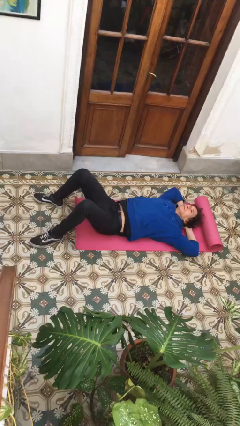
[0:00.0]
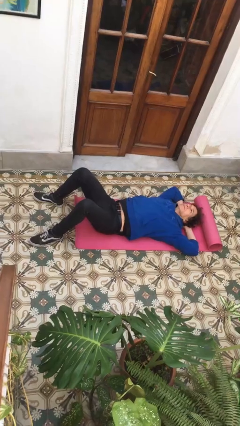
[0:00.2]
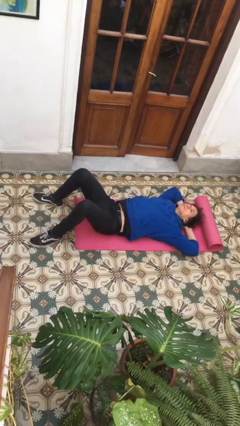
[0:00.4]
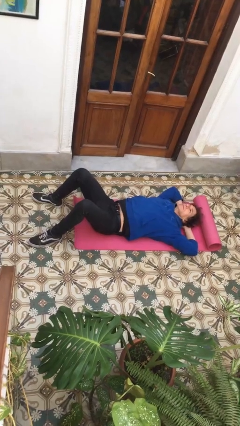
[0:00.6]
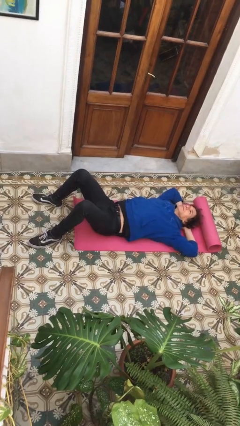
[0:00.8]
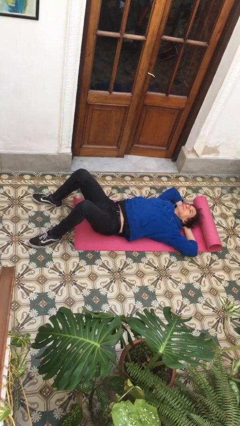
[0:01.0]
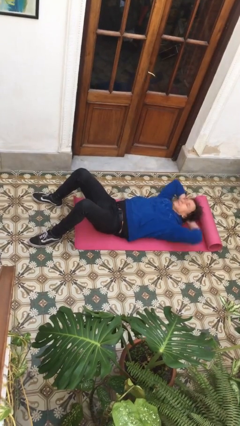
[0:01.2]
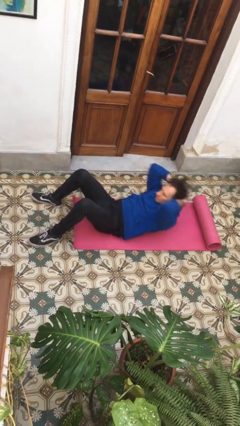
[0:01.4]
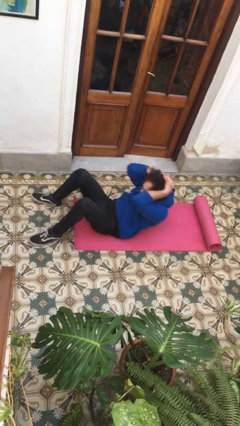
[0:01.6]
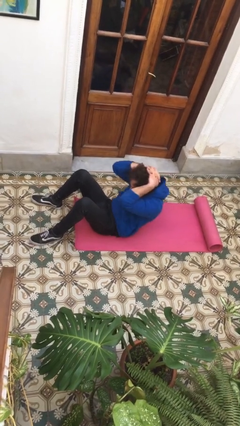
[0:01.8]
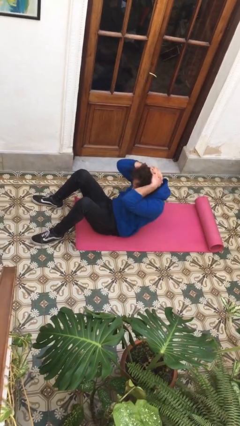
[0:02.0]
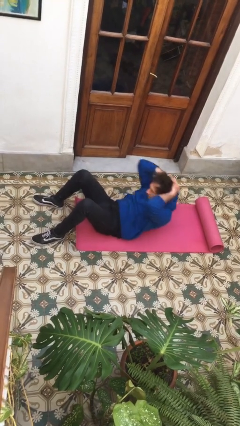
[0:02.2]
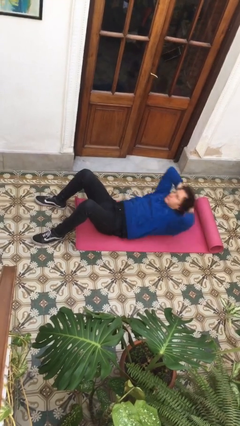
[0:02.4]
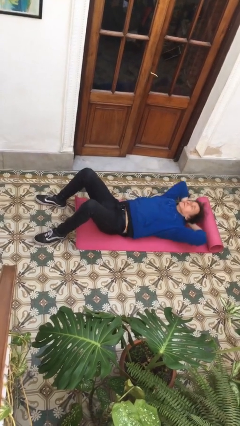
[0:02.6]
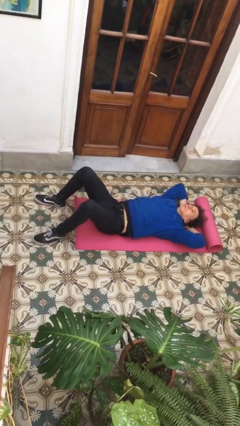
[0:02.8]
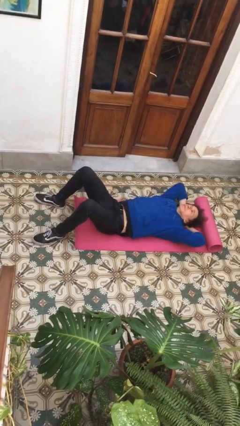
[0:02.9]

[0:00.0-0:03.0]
person exercises with situp

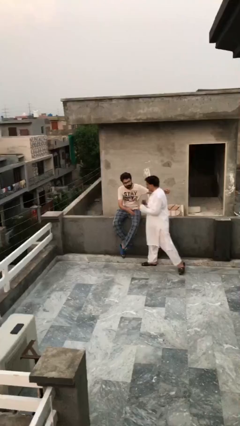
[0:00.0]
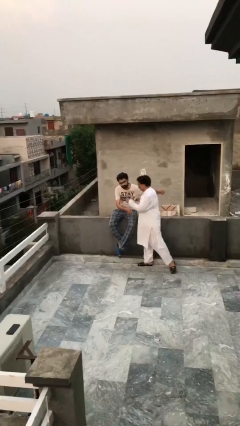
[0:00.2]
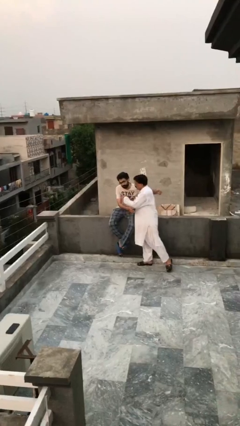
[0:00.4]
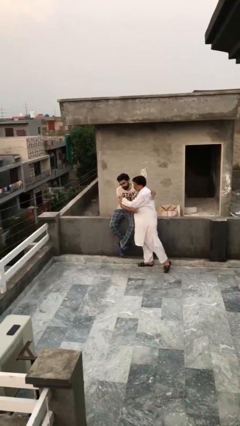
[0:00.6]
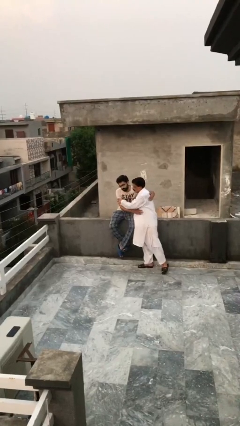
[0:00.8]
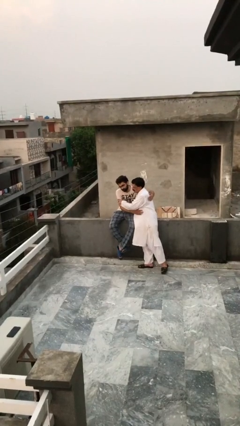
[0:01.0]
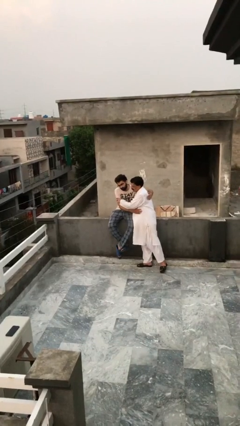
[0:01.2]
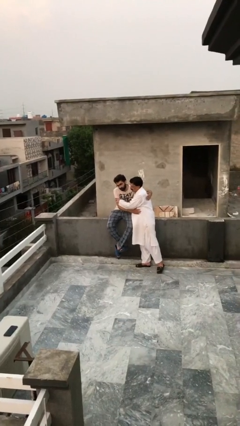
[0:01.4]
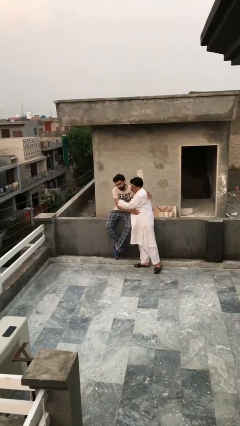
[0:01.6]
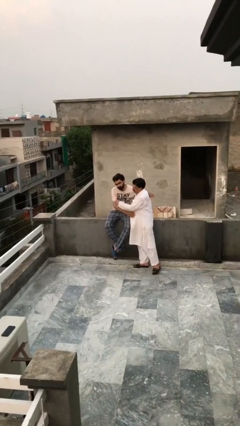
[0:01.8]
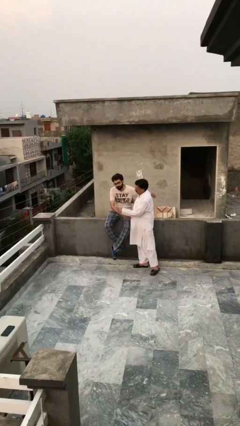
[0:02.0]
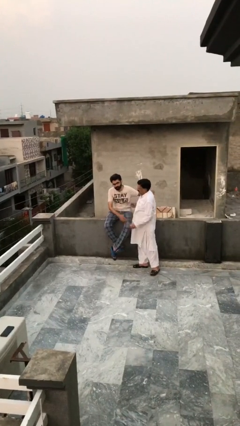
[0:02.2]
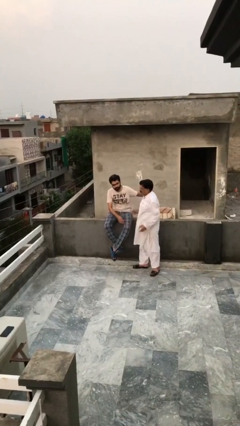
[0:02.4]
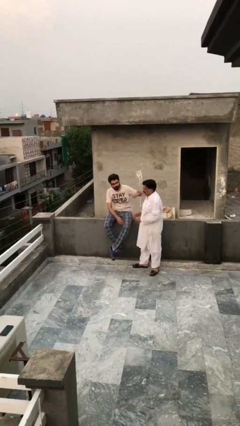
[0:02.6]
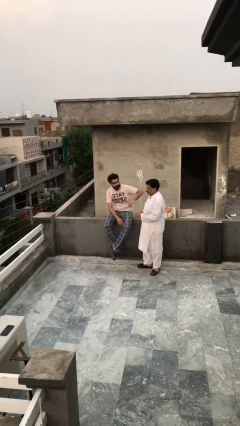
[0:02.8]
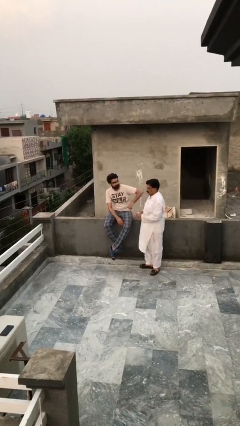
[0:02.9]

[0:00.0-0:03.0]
person embraces person

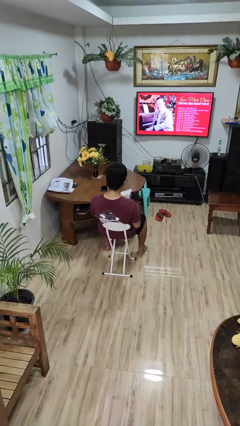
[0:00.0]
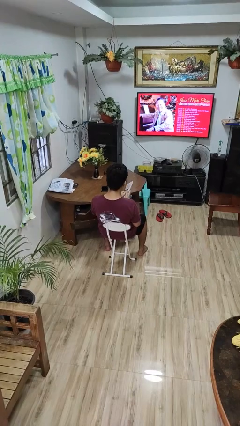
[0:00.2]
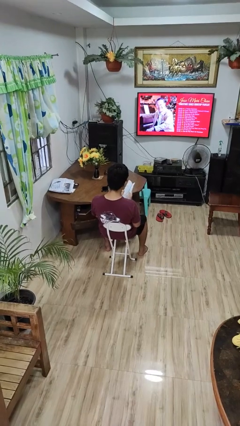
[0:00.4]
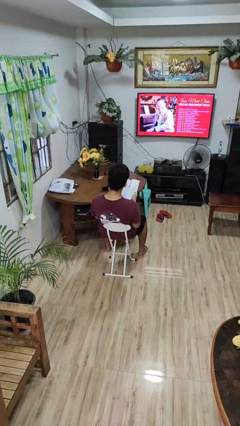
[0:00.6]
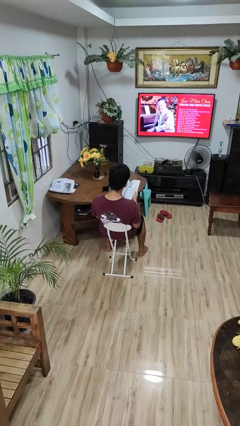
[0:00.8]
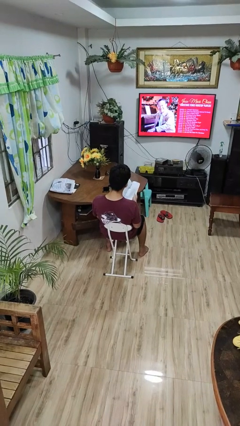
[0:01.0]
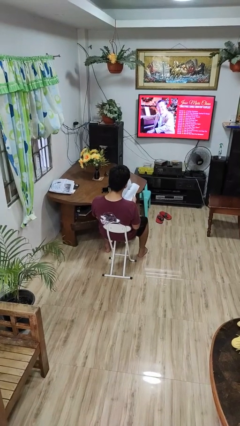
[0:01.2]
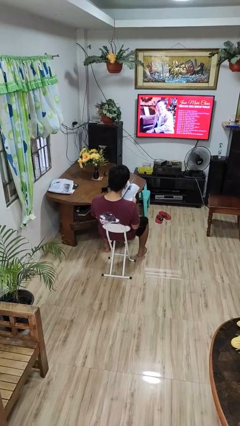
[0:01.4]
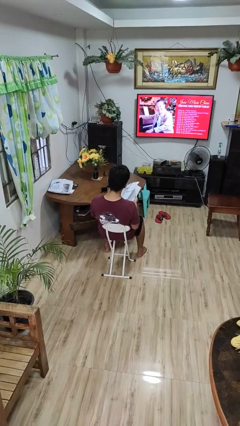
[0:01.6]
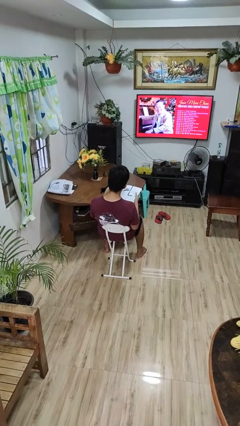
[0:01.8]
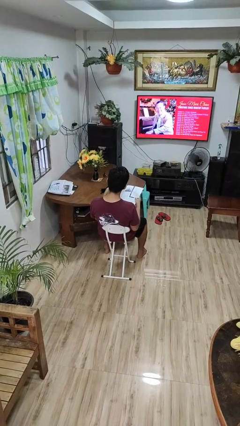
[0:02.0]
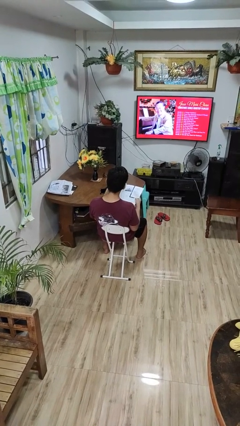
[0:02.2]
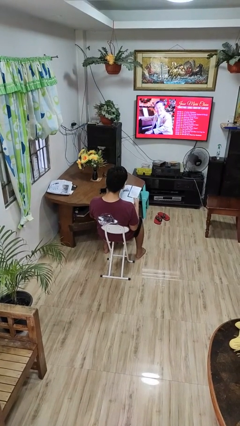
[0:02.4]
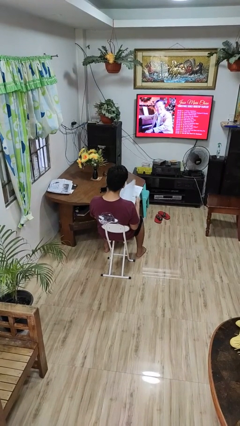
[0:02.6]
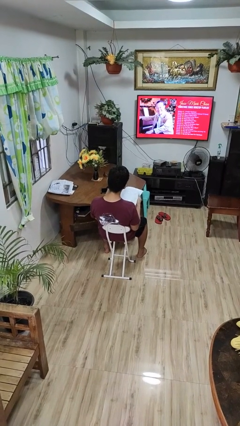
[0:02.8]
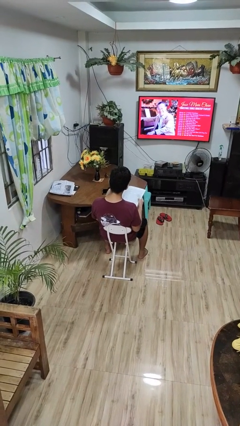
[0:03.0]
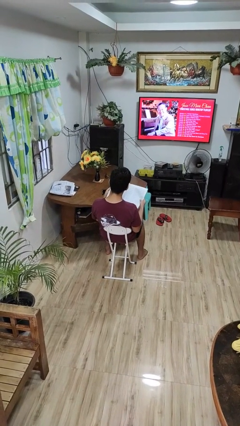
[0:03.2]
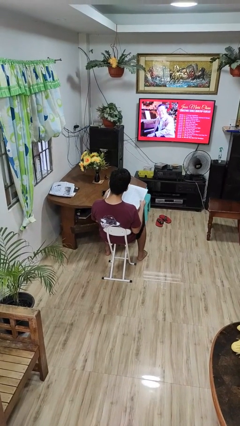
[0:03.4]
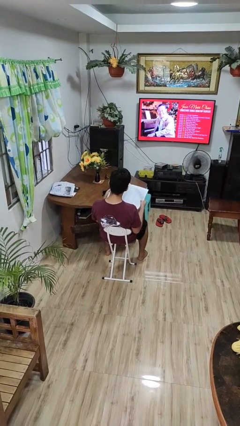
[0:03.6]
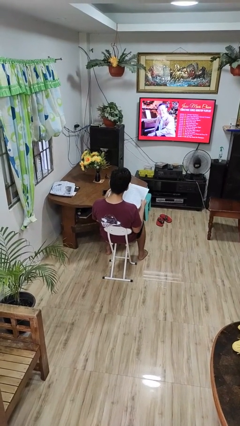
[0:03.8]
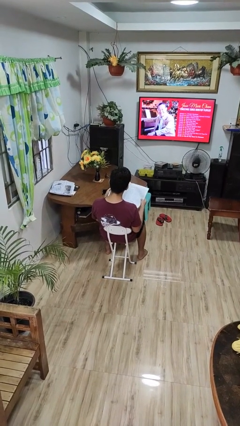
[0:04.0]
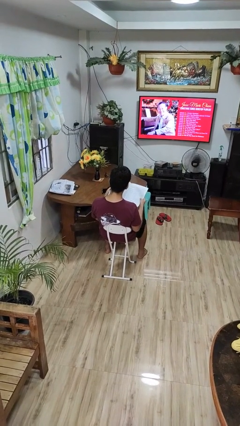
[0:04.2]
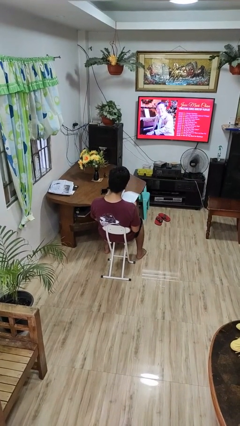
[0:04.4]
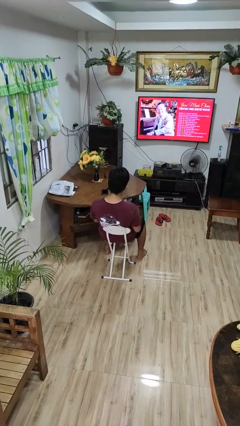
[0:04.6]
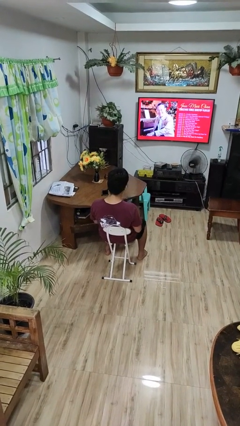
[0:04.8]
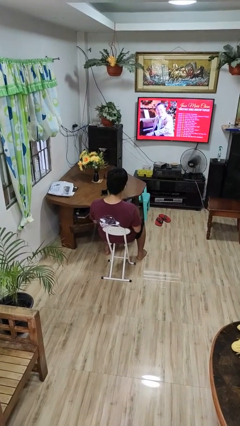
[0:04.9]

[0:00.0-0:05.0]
person reads magazine

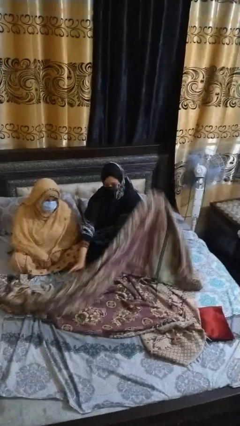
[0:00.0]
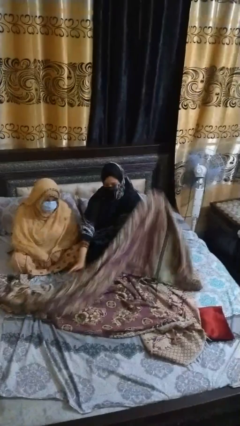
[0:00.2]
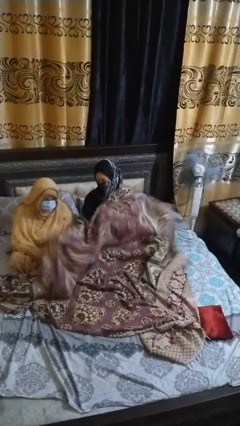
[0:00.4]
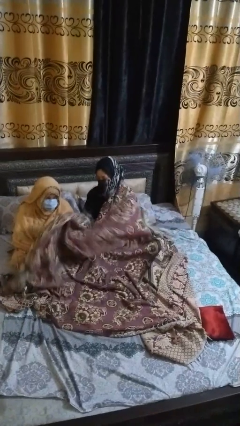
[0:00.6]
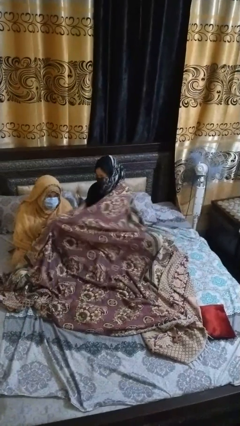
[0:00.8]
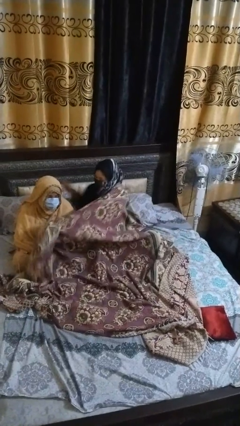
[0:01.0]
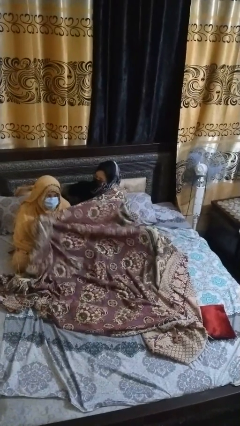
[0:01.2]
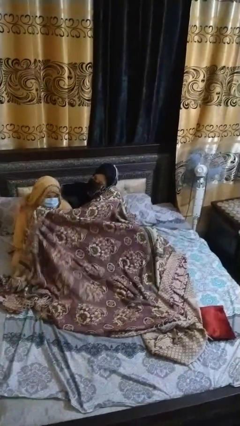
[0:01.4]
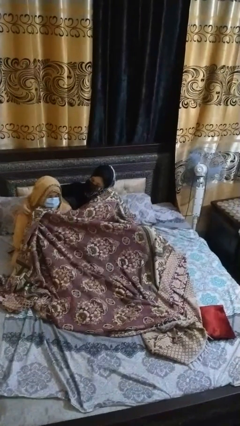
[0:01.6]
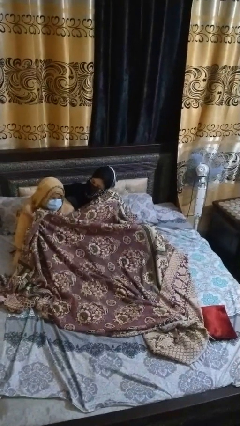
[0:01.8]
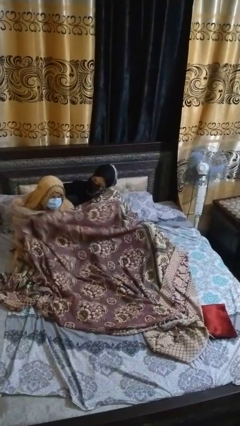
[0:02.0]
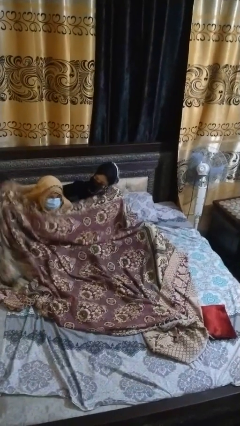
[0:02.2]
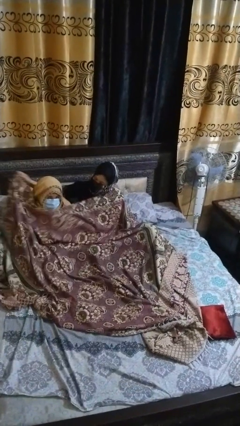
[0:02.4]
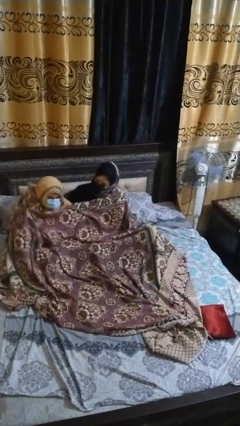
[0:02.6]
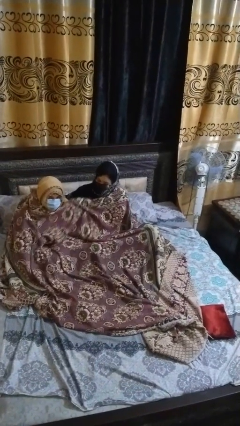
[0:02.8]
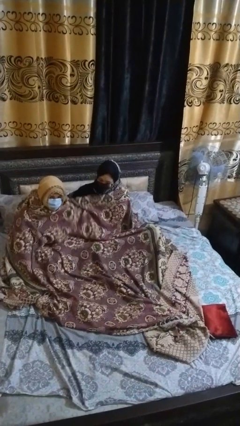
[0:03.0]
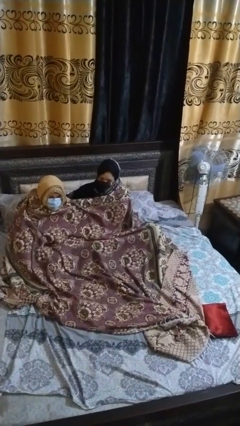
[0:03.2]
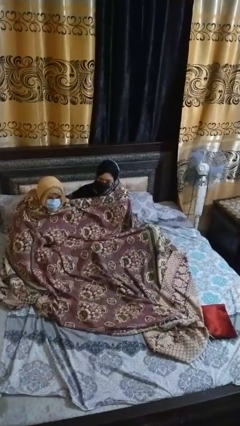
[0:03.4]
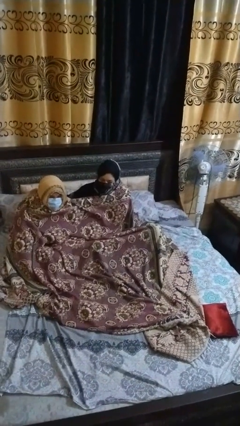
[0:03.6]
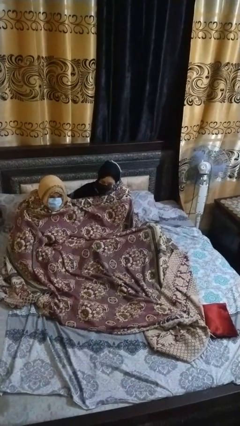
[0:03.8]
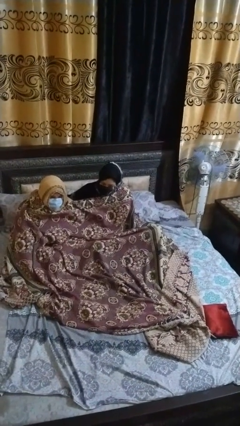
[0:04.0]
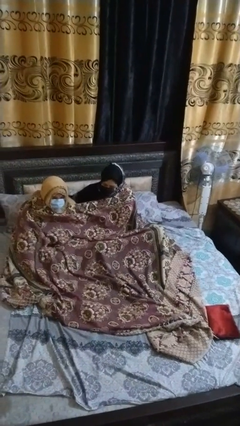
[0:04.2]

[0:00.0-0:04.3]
person covers friend with blanket

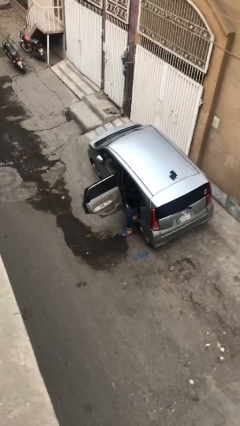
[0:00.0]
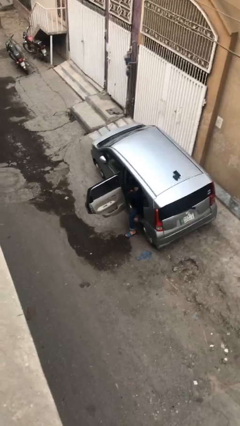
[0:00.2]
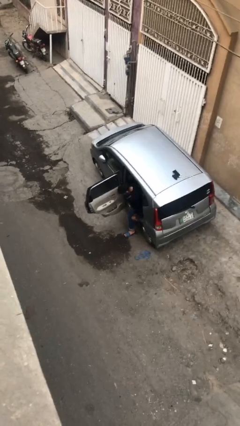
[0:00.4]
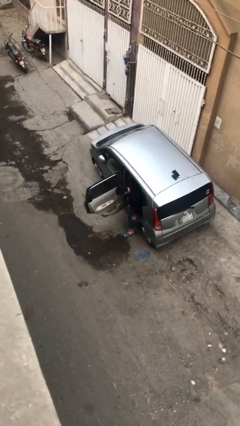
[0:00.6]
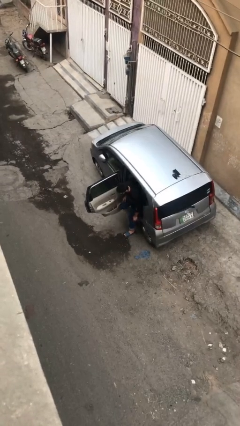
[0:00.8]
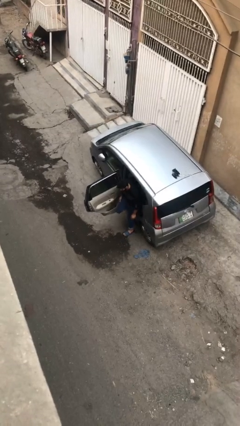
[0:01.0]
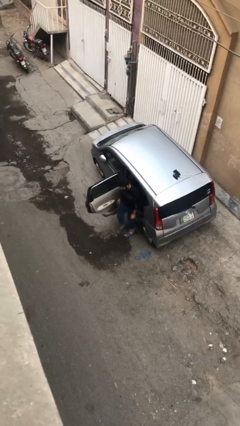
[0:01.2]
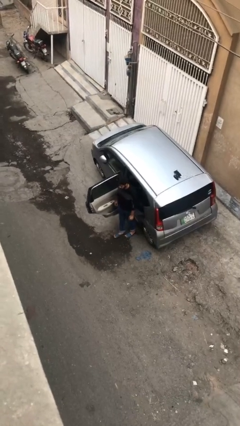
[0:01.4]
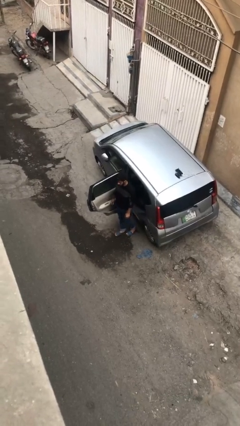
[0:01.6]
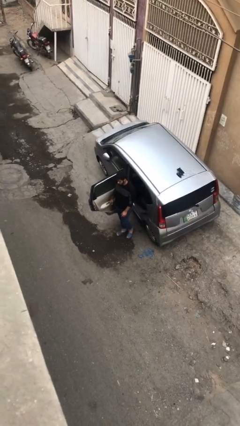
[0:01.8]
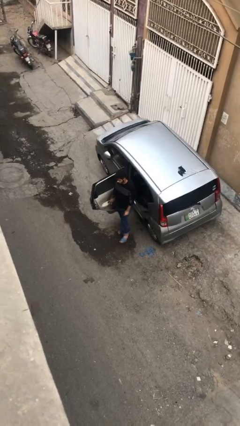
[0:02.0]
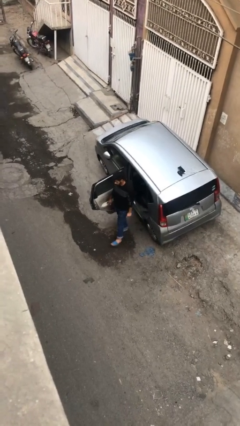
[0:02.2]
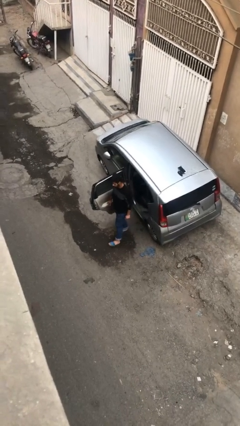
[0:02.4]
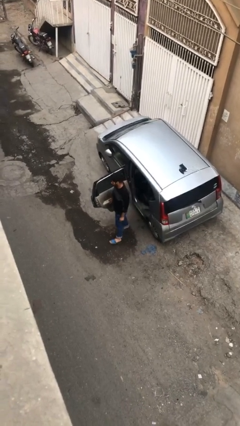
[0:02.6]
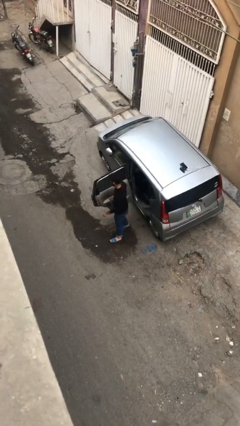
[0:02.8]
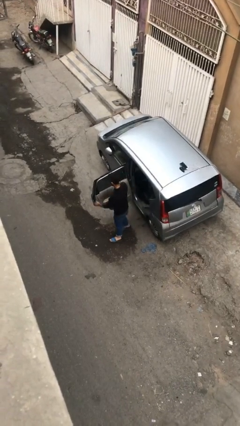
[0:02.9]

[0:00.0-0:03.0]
person exits car

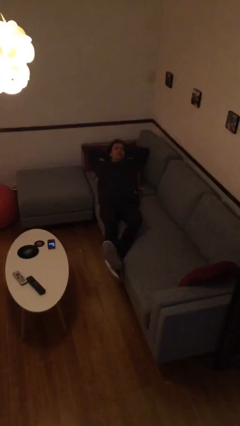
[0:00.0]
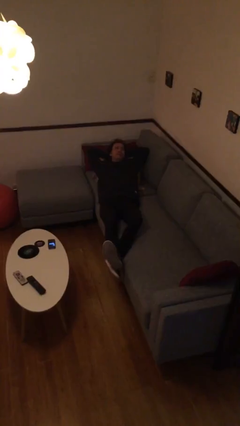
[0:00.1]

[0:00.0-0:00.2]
person stands up
